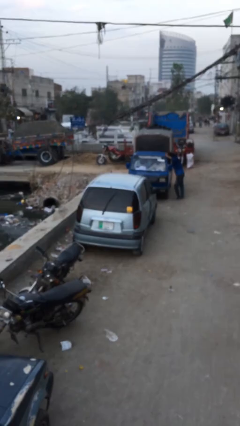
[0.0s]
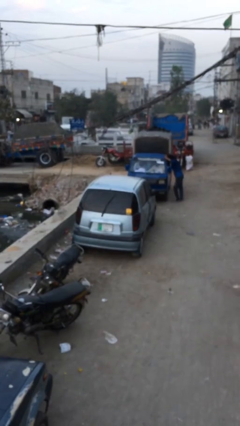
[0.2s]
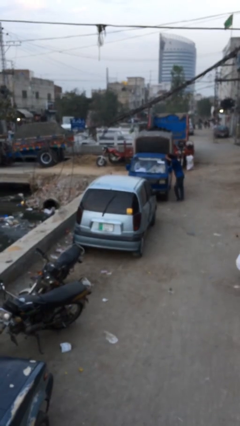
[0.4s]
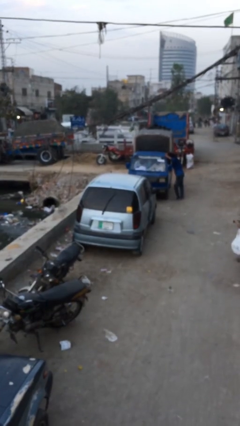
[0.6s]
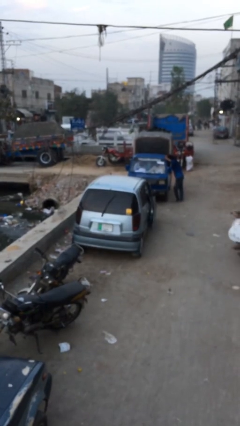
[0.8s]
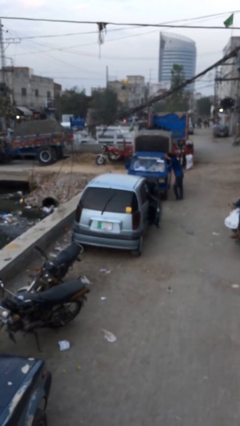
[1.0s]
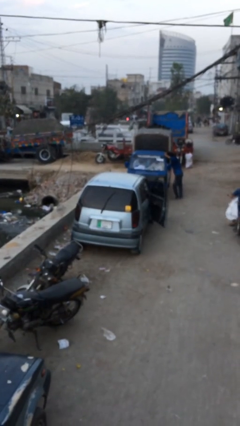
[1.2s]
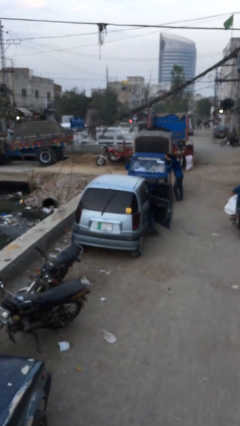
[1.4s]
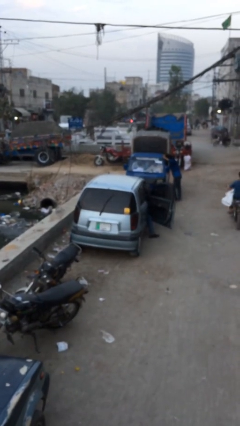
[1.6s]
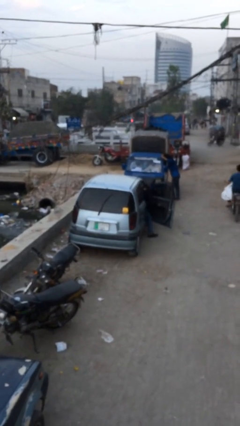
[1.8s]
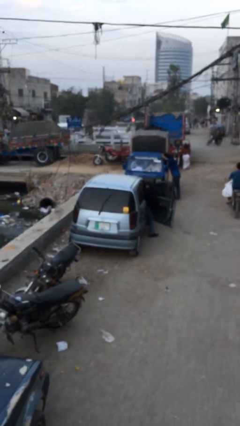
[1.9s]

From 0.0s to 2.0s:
car drops off person

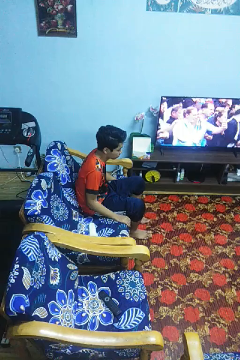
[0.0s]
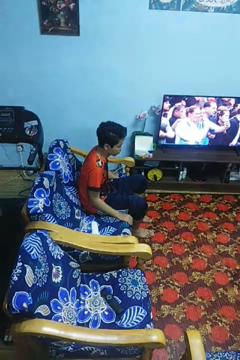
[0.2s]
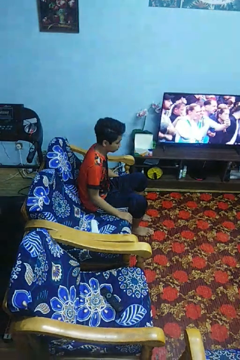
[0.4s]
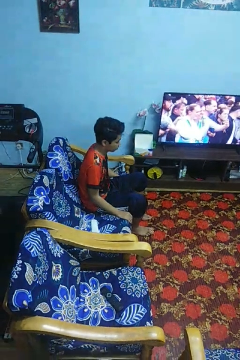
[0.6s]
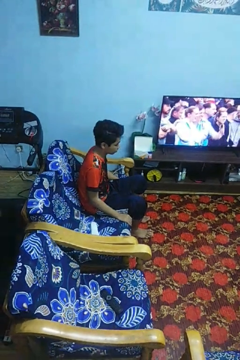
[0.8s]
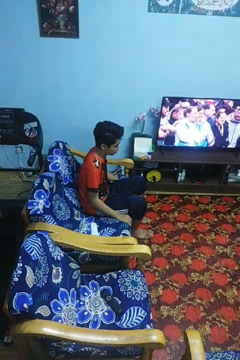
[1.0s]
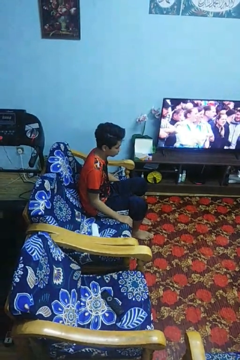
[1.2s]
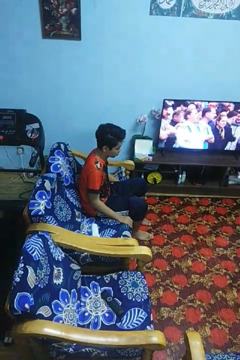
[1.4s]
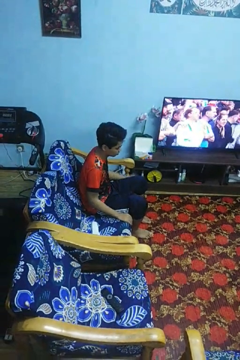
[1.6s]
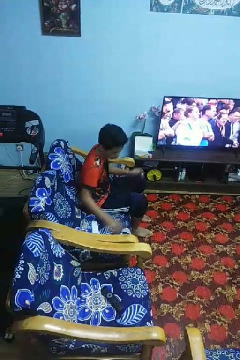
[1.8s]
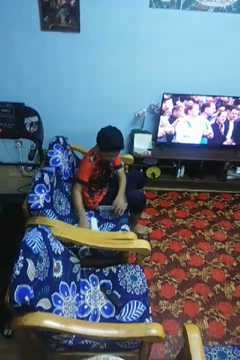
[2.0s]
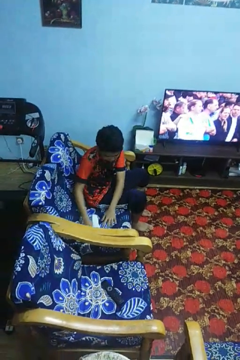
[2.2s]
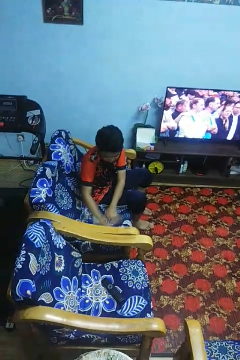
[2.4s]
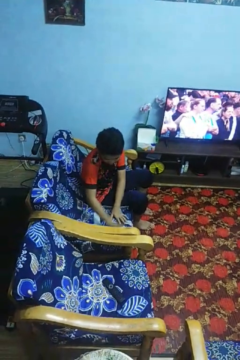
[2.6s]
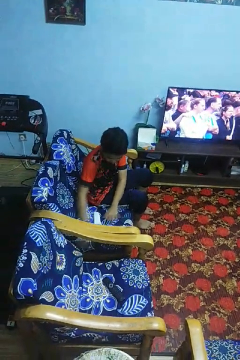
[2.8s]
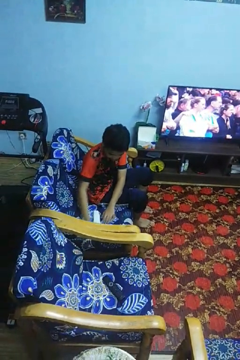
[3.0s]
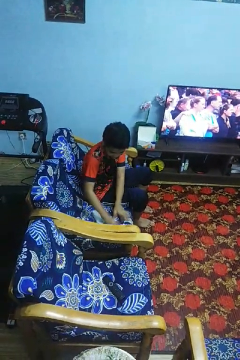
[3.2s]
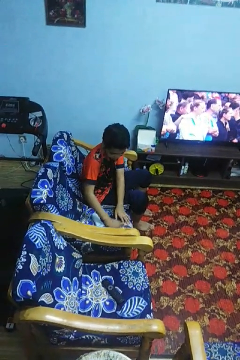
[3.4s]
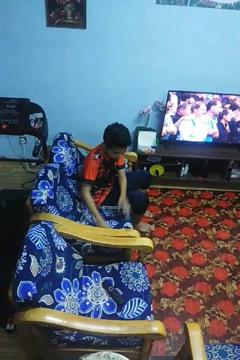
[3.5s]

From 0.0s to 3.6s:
person searches in couch

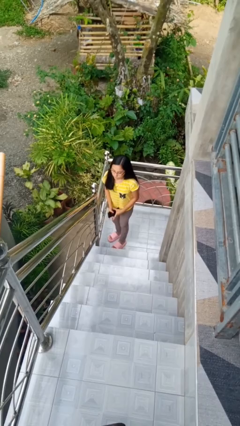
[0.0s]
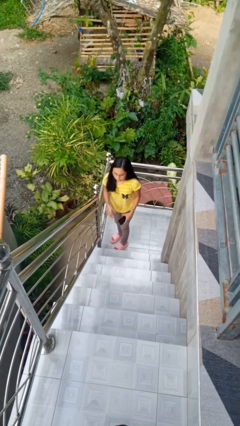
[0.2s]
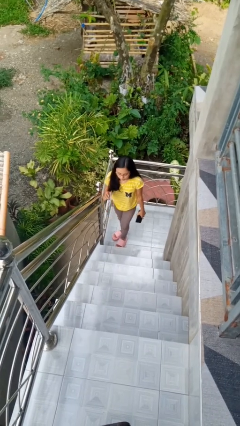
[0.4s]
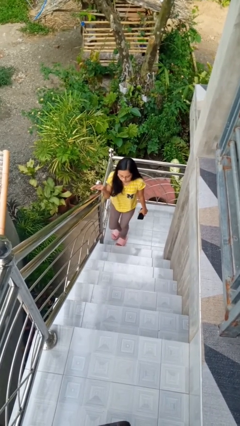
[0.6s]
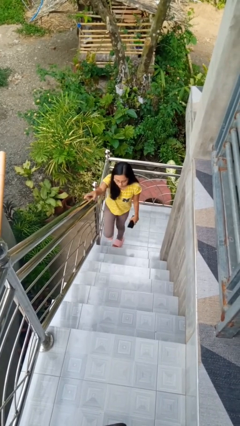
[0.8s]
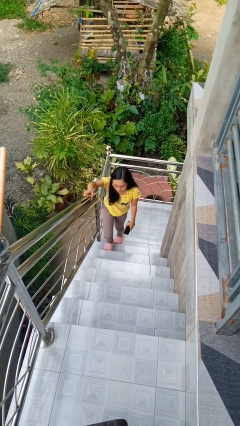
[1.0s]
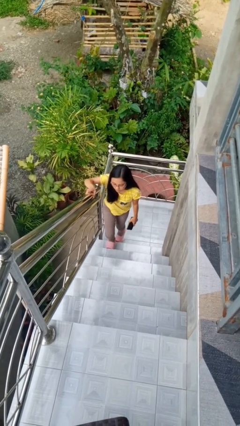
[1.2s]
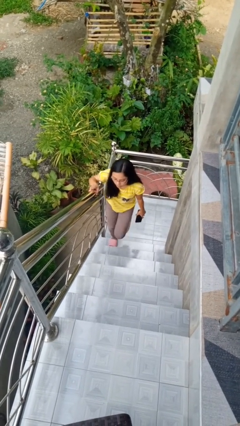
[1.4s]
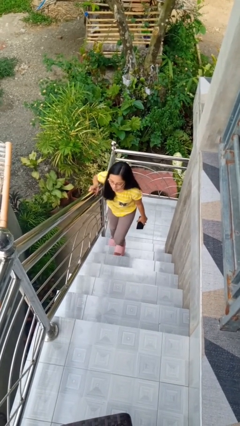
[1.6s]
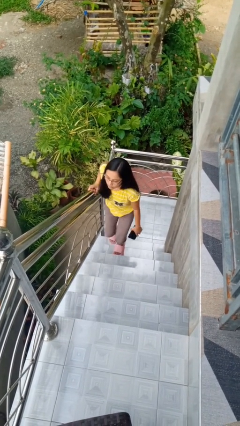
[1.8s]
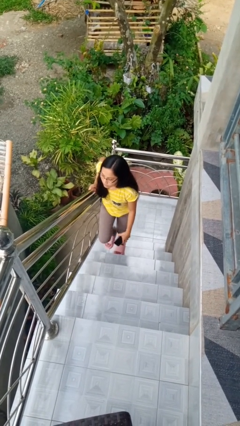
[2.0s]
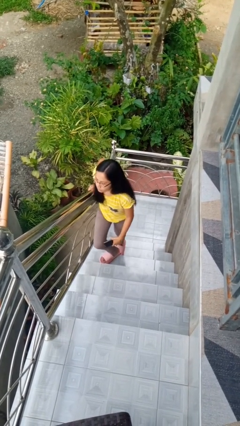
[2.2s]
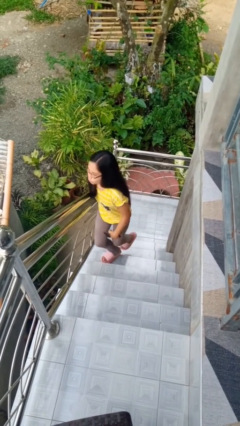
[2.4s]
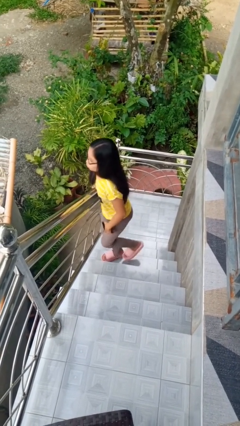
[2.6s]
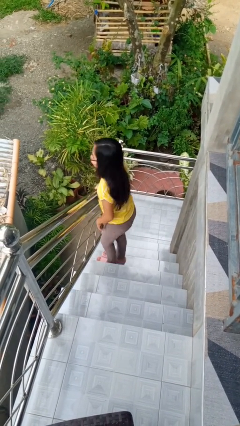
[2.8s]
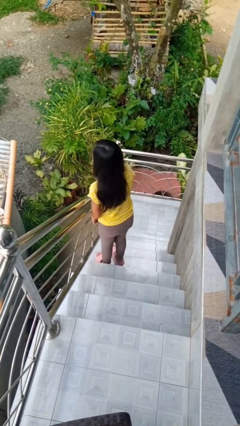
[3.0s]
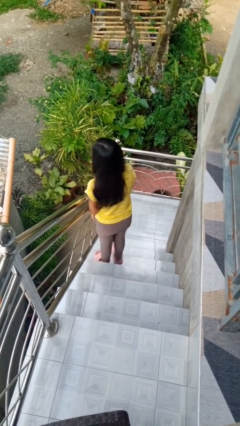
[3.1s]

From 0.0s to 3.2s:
person climbs up stairs

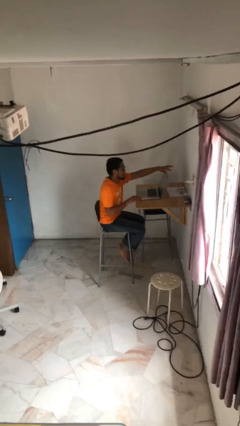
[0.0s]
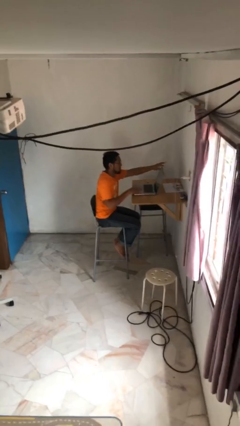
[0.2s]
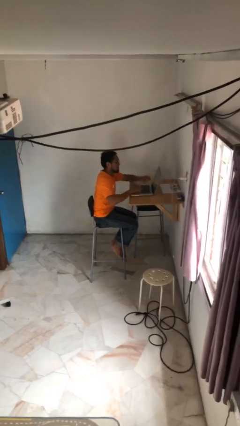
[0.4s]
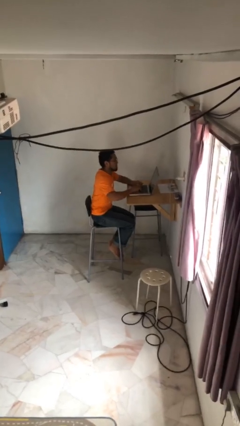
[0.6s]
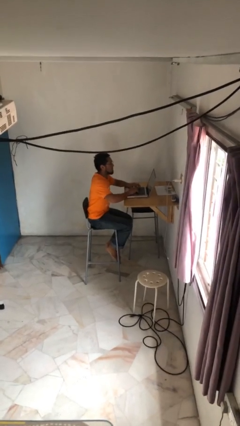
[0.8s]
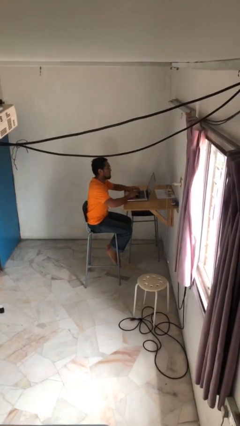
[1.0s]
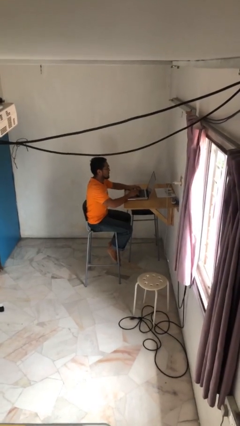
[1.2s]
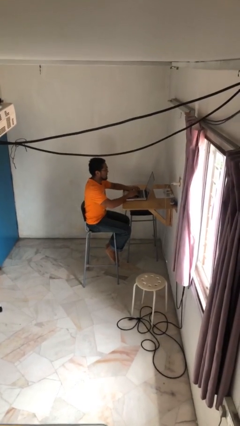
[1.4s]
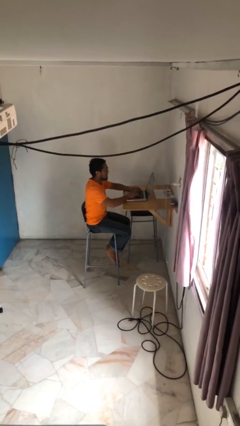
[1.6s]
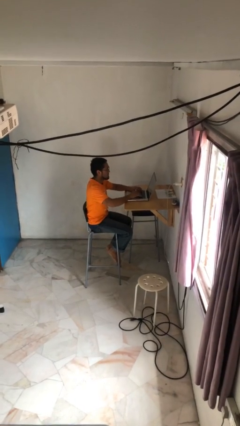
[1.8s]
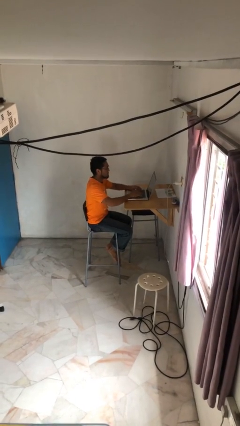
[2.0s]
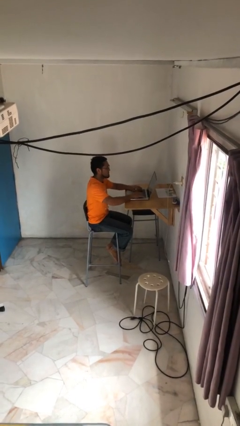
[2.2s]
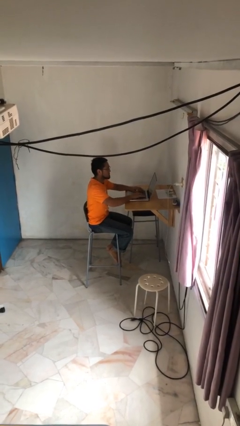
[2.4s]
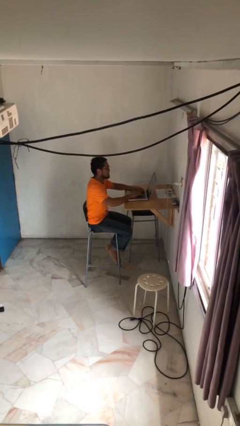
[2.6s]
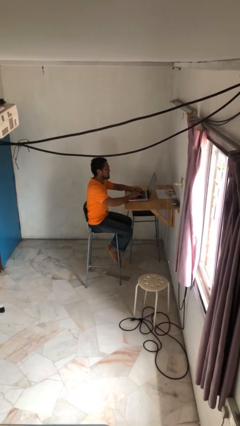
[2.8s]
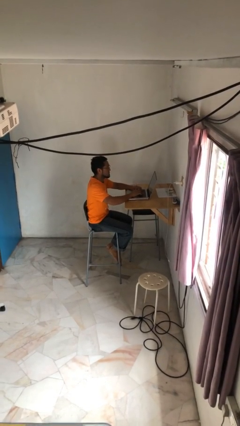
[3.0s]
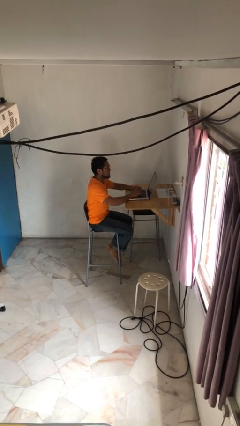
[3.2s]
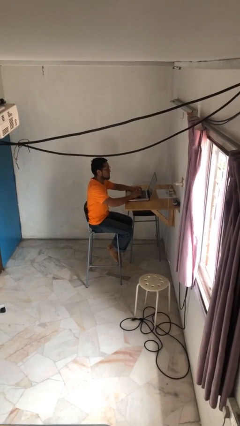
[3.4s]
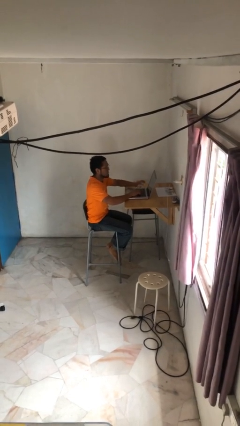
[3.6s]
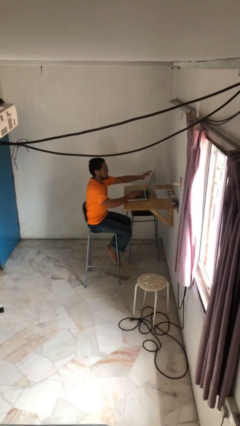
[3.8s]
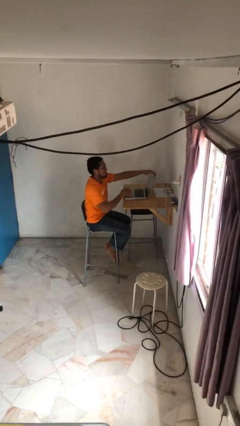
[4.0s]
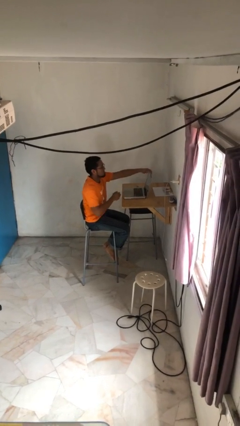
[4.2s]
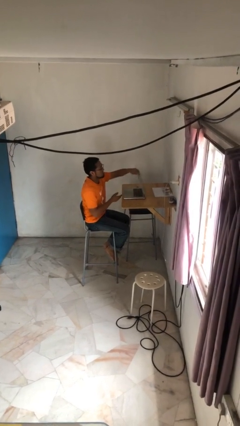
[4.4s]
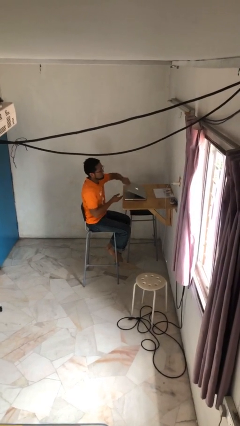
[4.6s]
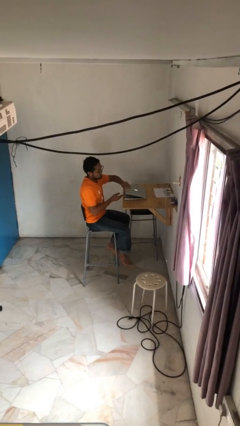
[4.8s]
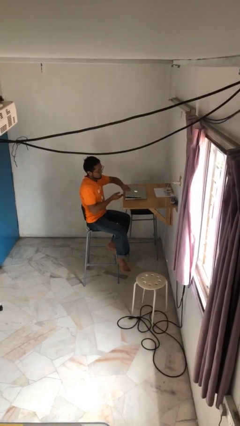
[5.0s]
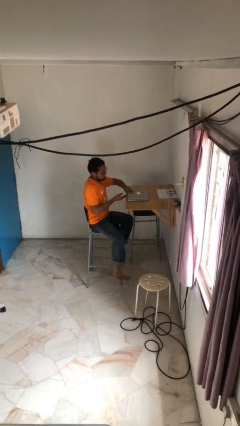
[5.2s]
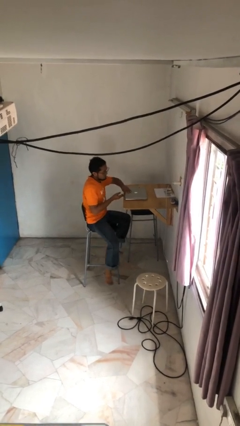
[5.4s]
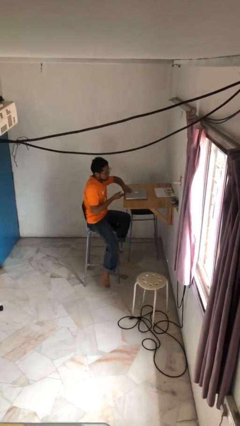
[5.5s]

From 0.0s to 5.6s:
person interacts with laptop

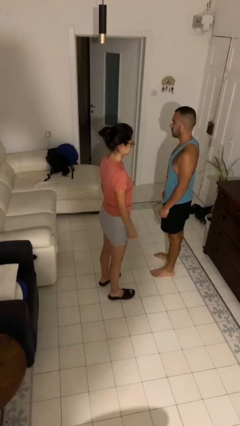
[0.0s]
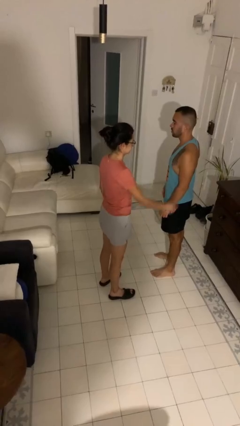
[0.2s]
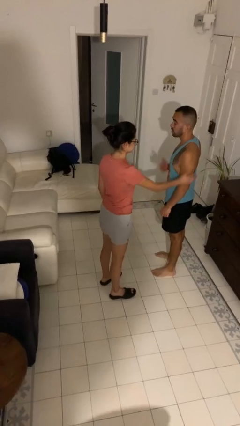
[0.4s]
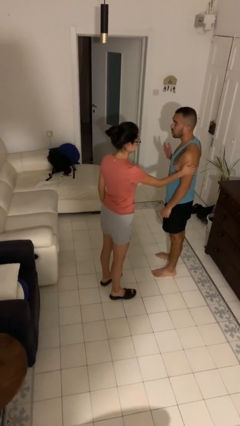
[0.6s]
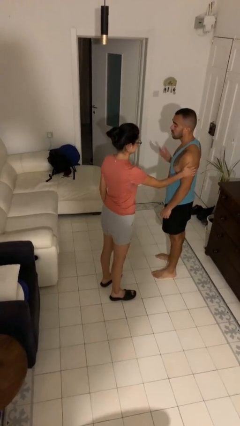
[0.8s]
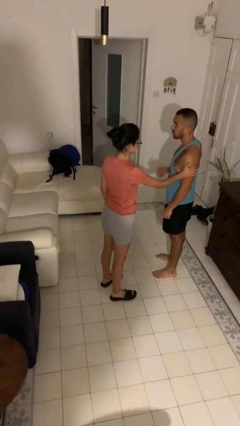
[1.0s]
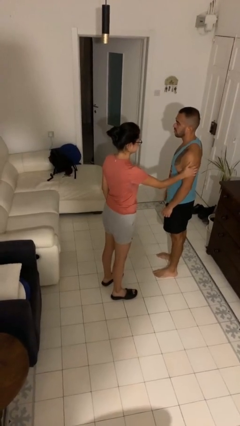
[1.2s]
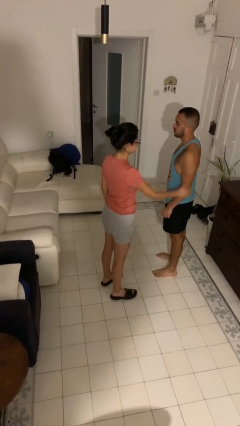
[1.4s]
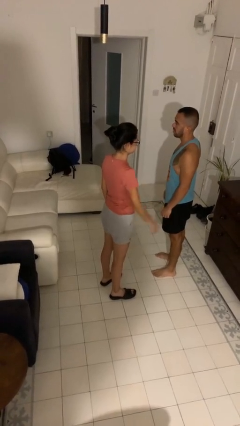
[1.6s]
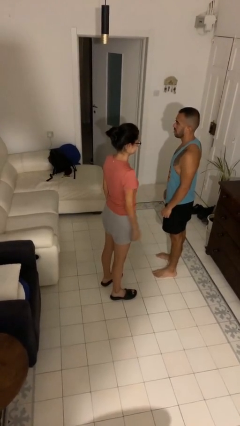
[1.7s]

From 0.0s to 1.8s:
person grabs person by bicep

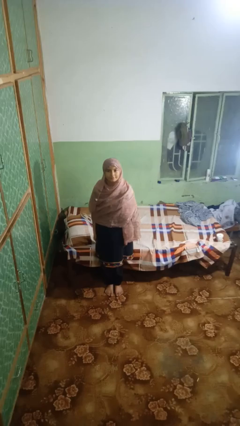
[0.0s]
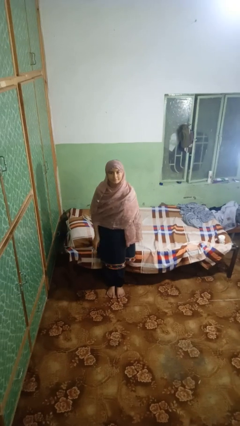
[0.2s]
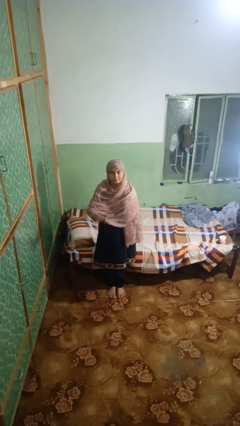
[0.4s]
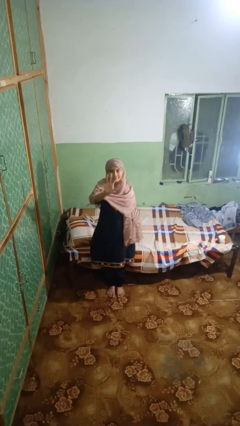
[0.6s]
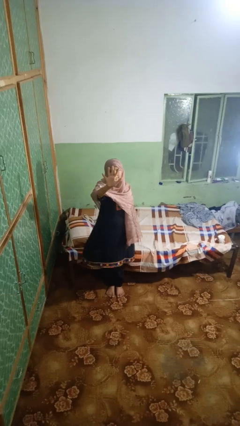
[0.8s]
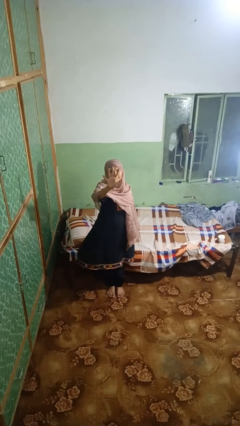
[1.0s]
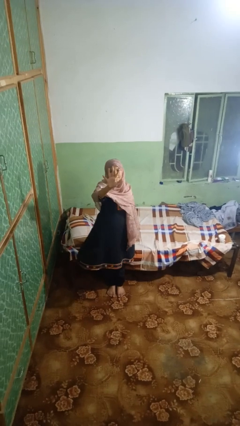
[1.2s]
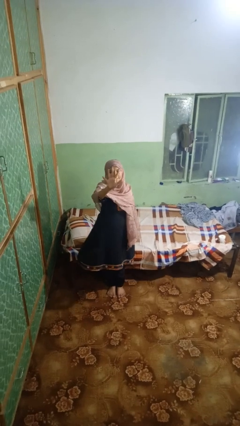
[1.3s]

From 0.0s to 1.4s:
person gestures number five

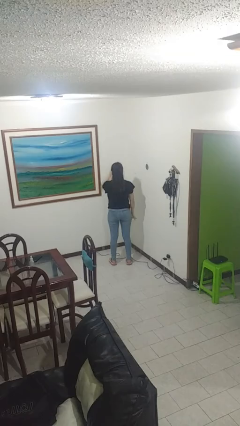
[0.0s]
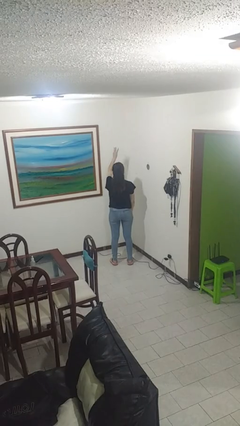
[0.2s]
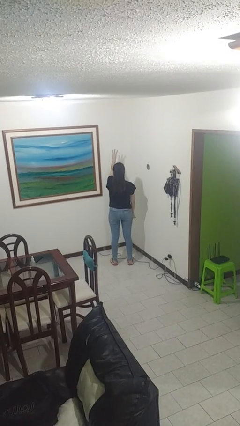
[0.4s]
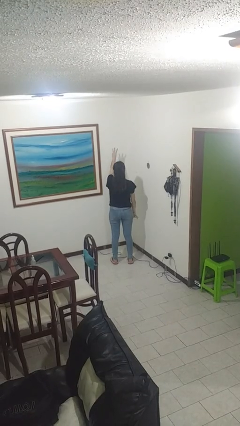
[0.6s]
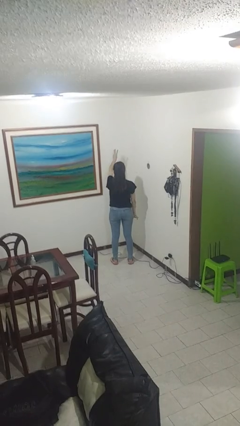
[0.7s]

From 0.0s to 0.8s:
person gestures number three
